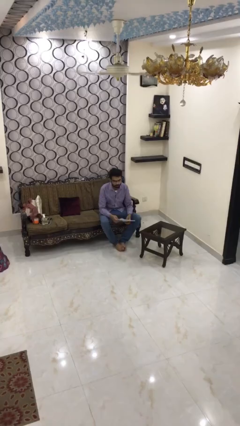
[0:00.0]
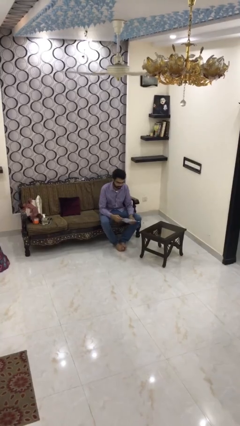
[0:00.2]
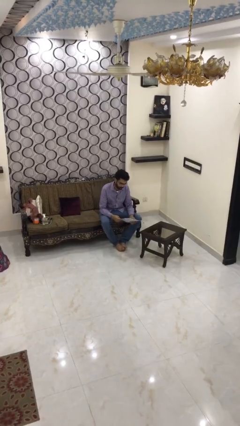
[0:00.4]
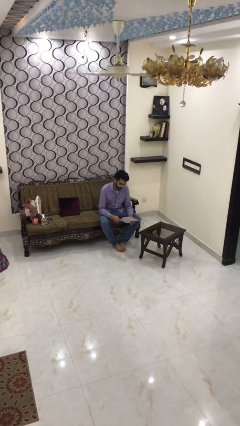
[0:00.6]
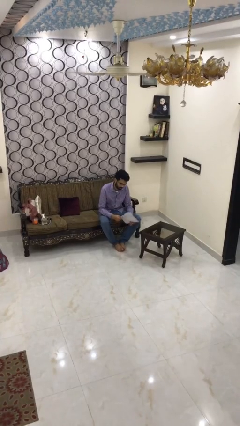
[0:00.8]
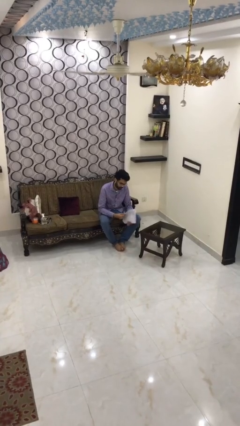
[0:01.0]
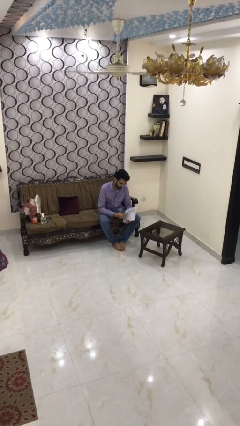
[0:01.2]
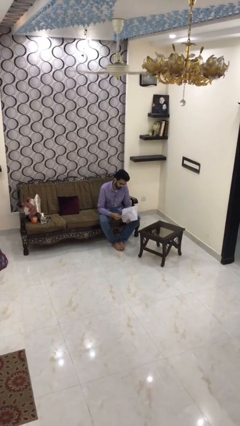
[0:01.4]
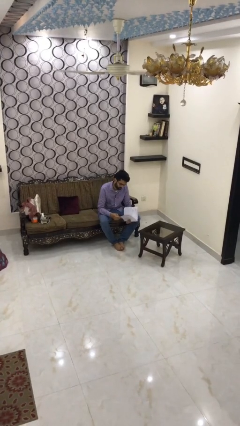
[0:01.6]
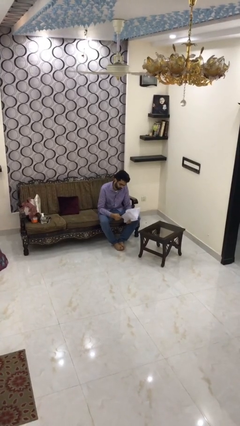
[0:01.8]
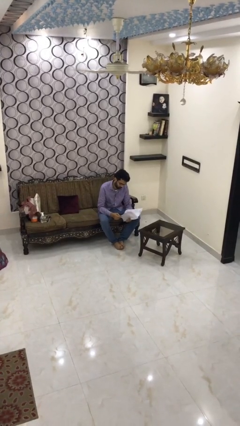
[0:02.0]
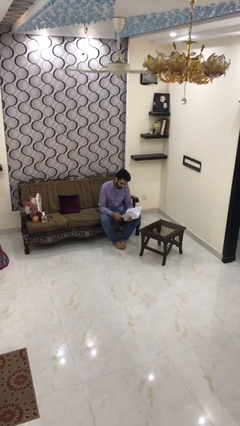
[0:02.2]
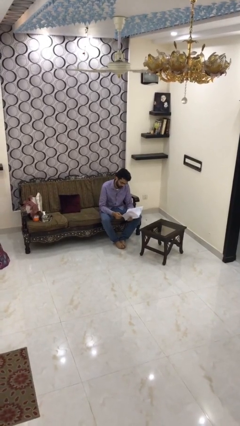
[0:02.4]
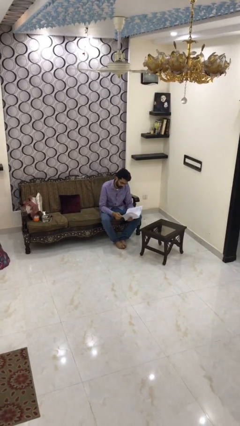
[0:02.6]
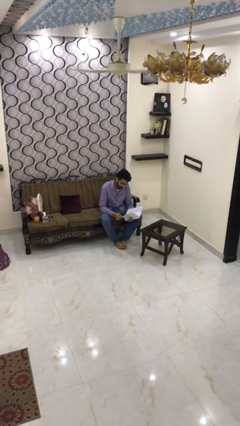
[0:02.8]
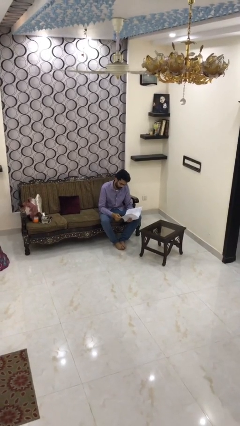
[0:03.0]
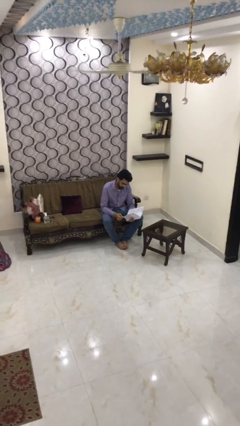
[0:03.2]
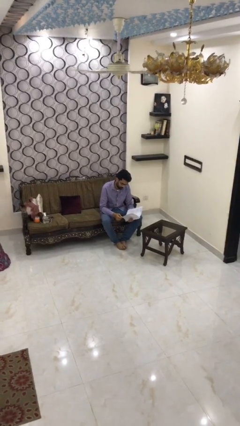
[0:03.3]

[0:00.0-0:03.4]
person reads document

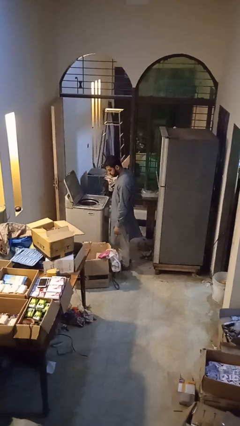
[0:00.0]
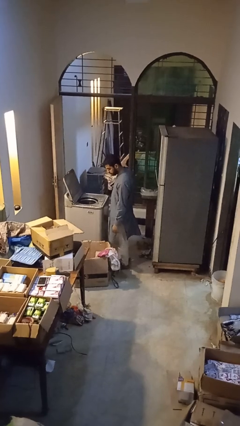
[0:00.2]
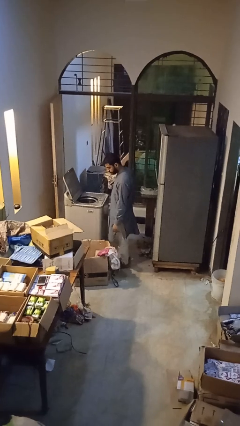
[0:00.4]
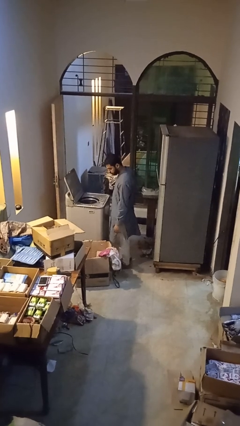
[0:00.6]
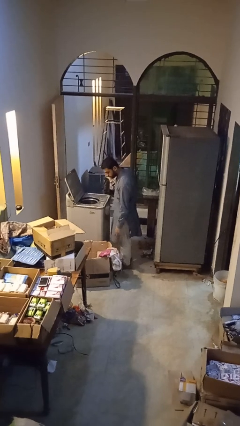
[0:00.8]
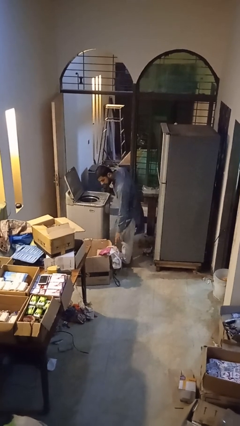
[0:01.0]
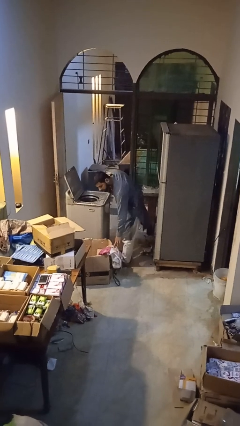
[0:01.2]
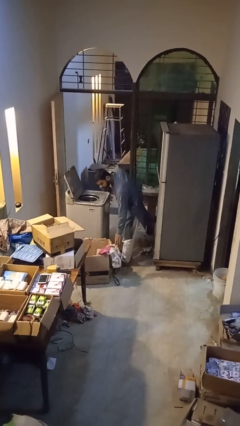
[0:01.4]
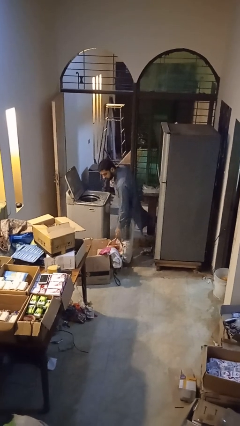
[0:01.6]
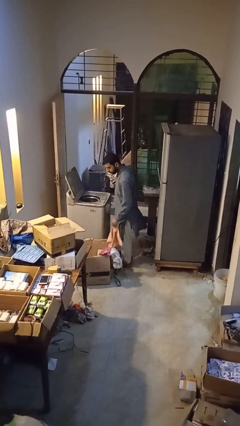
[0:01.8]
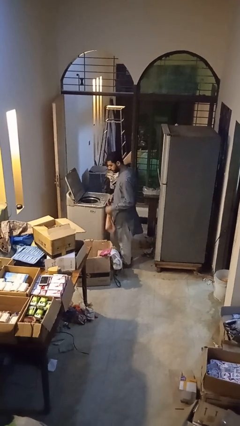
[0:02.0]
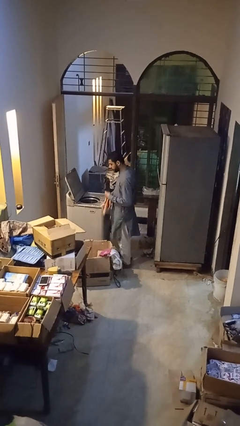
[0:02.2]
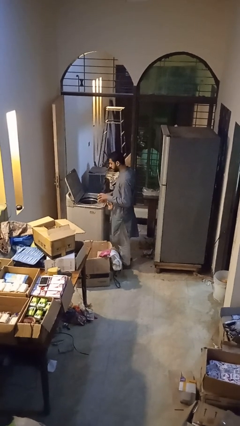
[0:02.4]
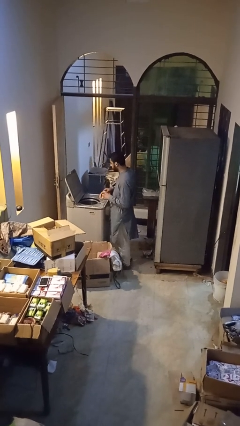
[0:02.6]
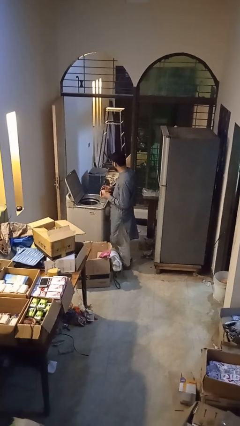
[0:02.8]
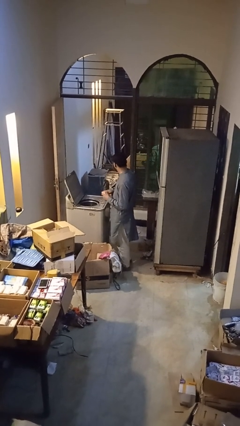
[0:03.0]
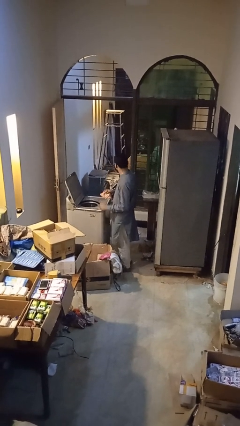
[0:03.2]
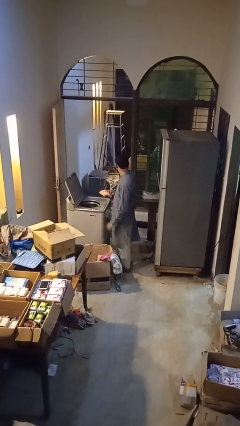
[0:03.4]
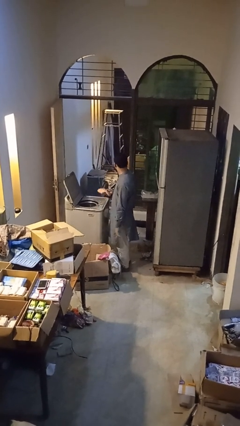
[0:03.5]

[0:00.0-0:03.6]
person unloads clotheswasher

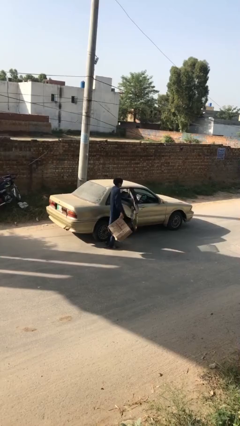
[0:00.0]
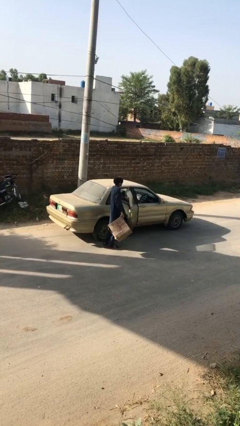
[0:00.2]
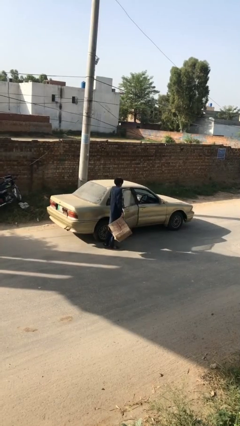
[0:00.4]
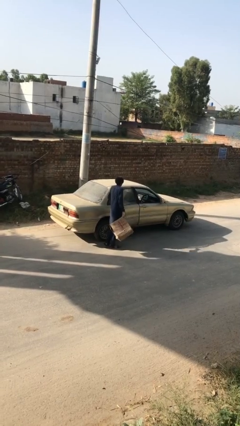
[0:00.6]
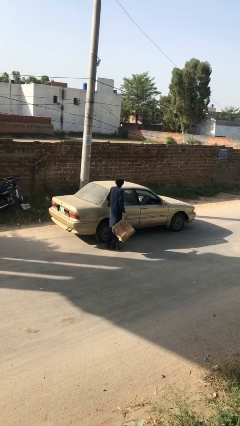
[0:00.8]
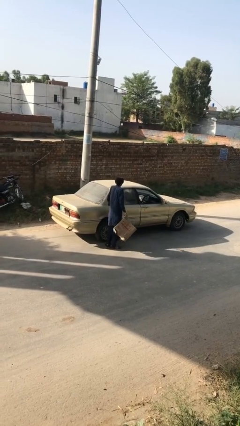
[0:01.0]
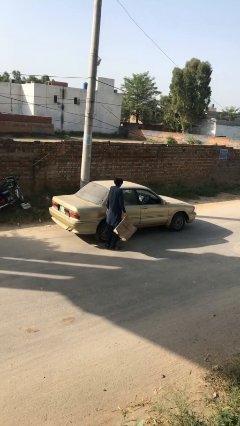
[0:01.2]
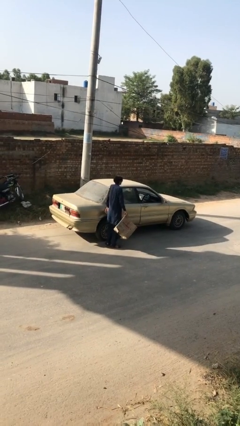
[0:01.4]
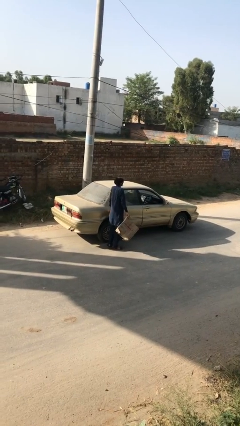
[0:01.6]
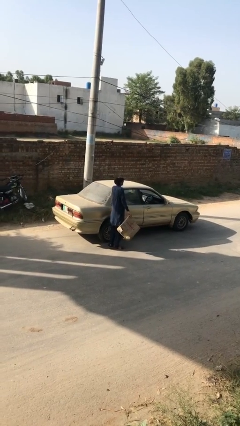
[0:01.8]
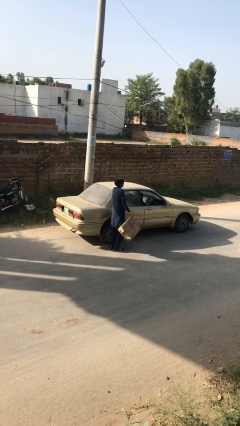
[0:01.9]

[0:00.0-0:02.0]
person closes car door

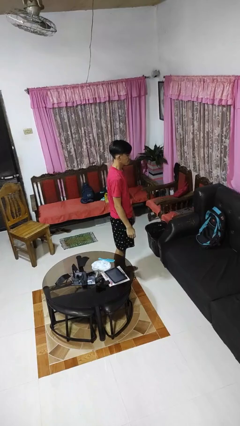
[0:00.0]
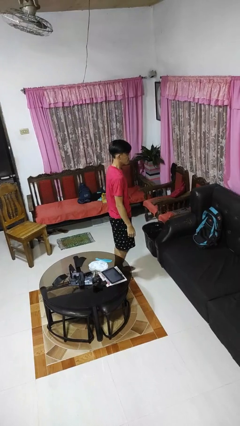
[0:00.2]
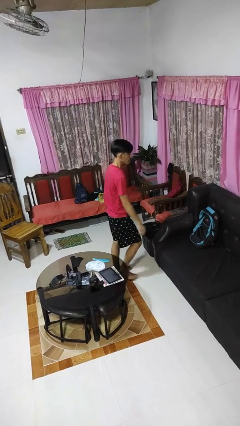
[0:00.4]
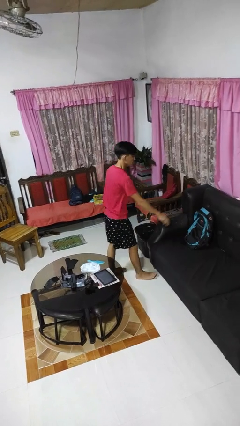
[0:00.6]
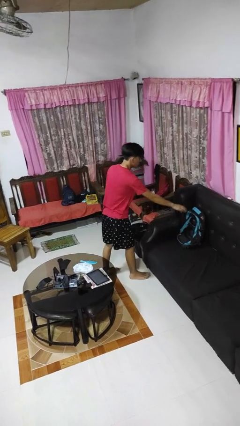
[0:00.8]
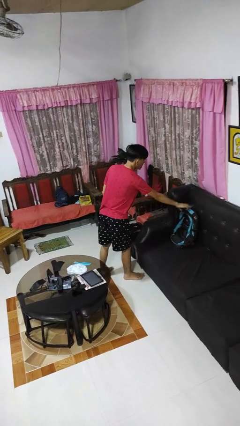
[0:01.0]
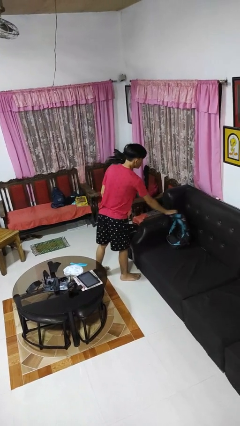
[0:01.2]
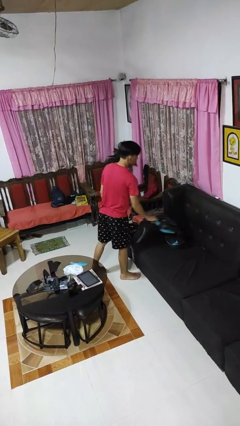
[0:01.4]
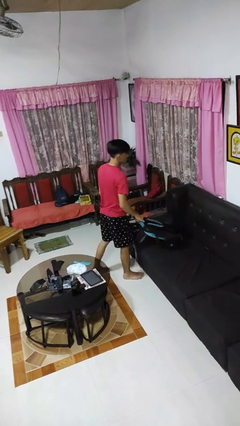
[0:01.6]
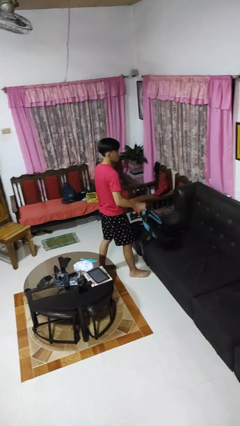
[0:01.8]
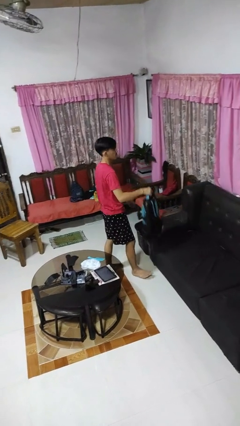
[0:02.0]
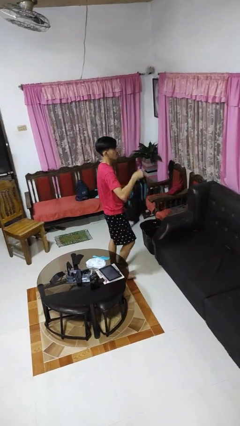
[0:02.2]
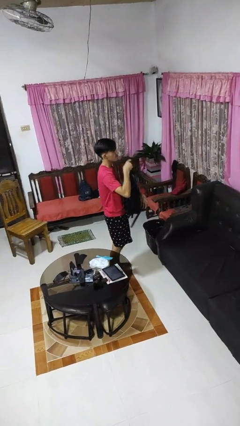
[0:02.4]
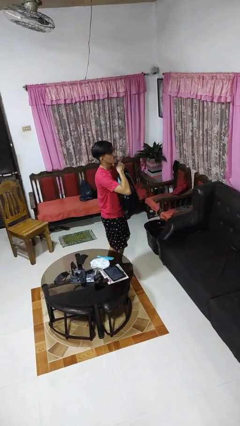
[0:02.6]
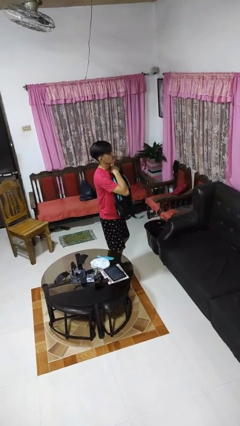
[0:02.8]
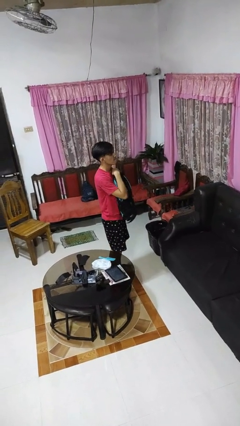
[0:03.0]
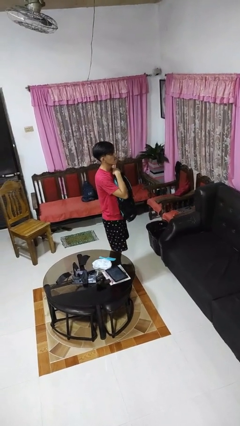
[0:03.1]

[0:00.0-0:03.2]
person picks up object from couch

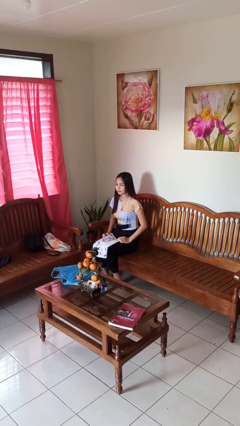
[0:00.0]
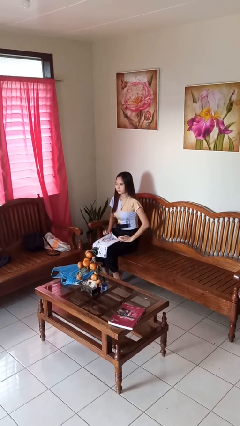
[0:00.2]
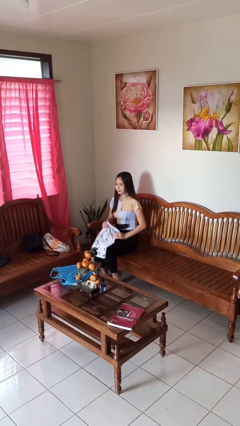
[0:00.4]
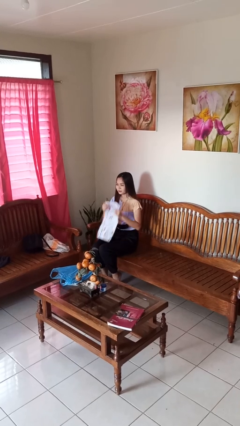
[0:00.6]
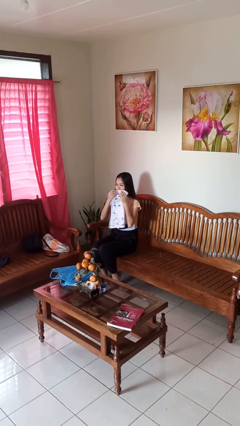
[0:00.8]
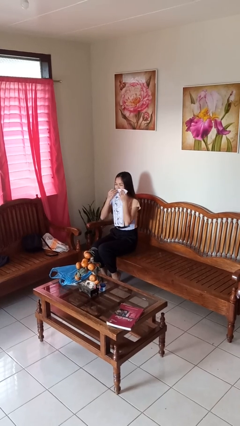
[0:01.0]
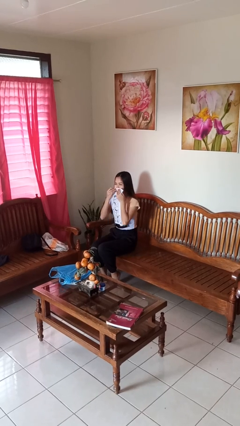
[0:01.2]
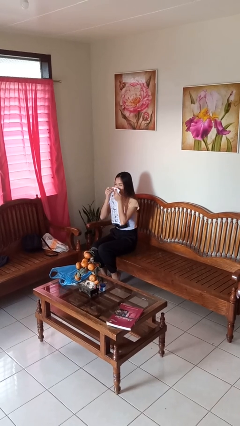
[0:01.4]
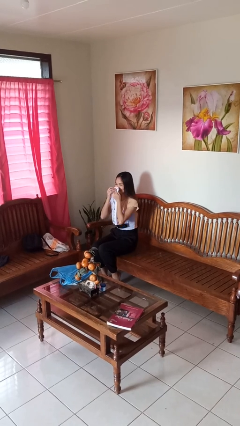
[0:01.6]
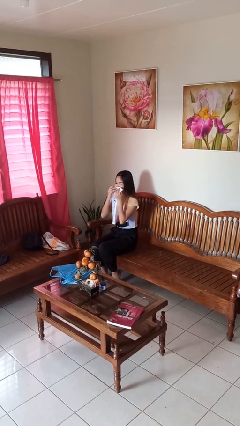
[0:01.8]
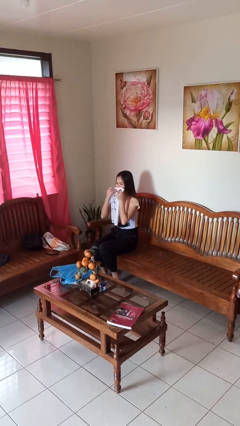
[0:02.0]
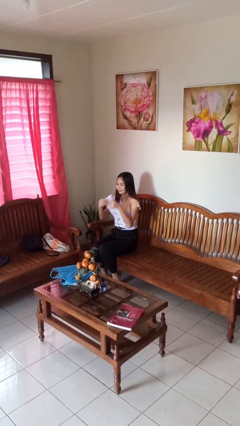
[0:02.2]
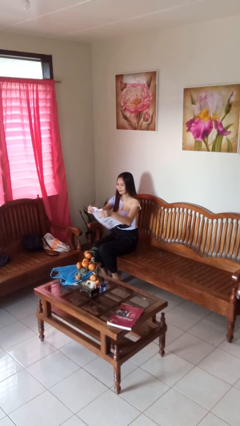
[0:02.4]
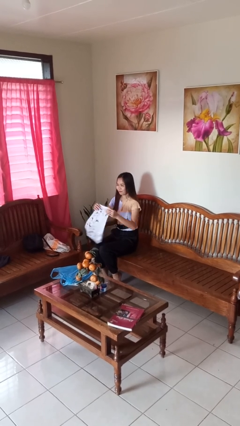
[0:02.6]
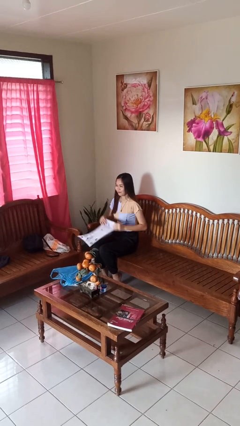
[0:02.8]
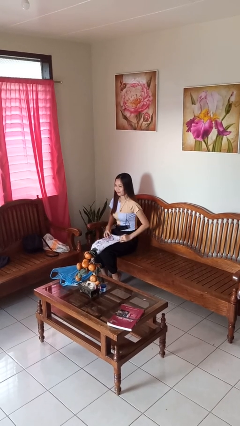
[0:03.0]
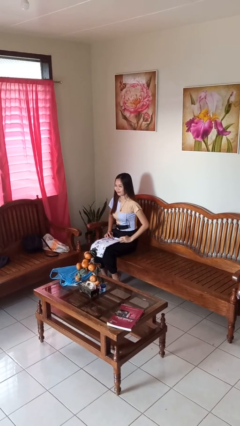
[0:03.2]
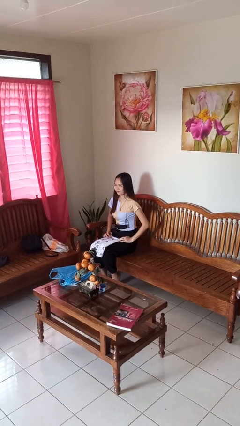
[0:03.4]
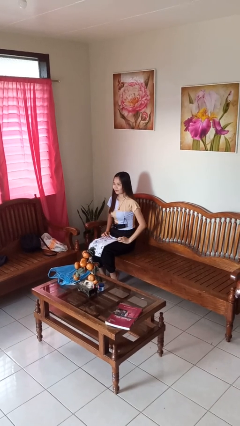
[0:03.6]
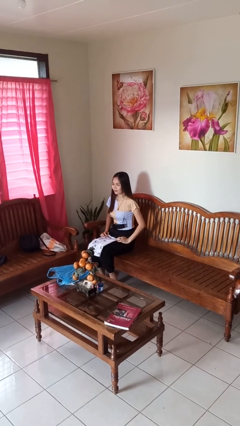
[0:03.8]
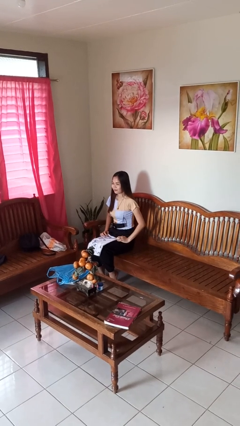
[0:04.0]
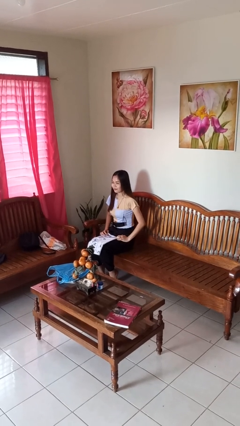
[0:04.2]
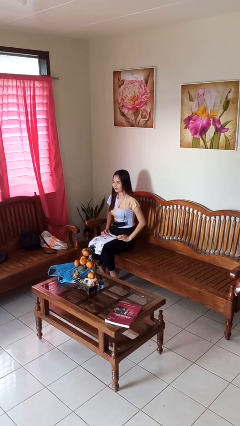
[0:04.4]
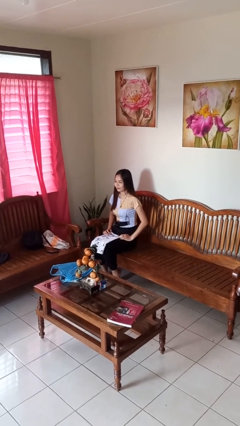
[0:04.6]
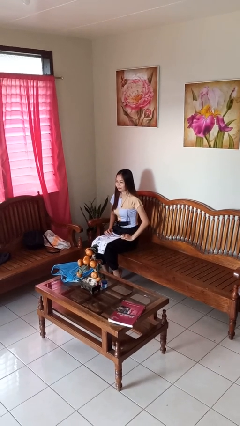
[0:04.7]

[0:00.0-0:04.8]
person wipes mouth with napkin
